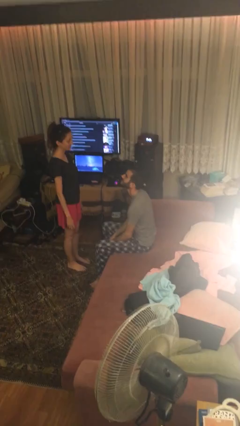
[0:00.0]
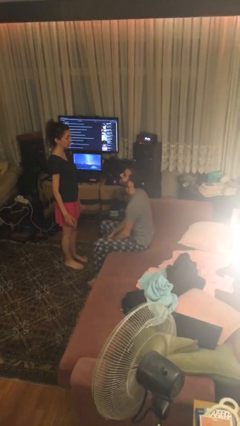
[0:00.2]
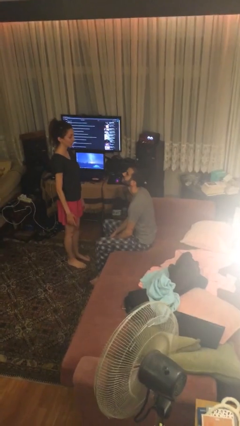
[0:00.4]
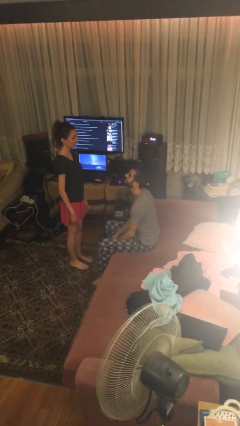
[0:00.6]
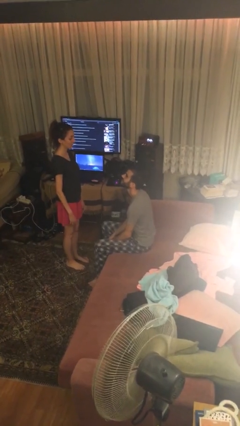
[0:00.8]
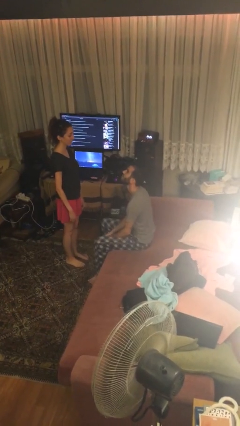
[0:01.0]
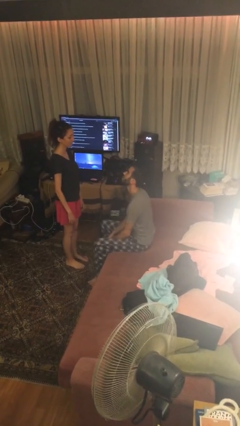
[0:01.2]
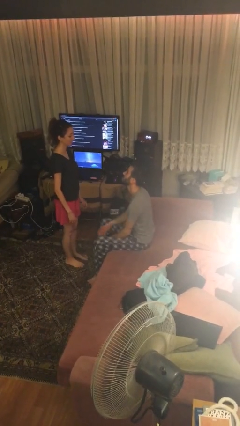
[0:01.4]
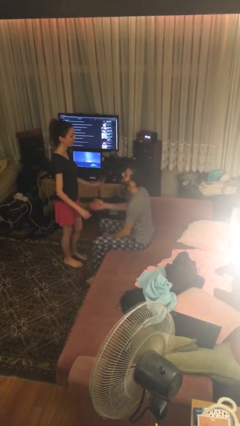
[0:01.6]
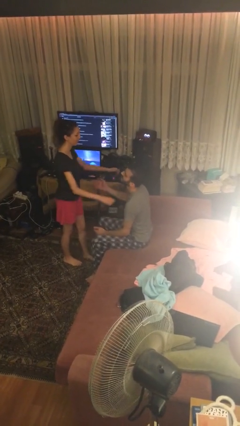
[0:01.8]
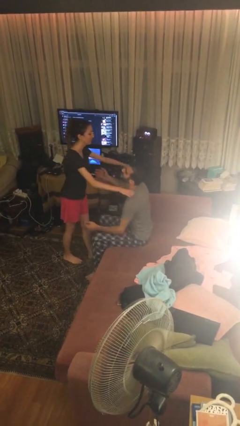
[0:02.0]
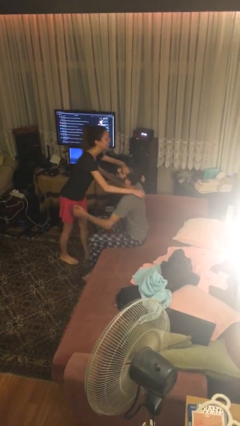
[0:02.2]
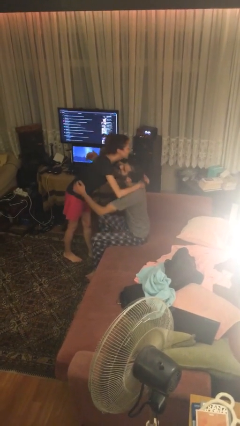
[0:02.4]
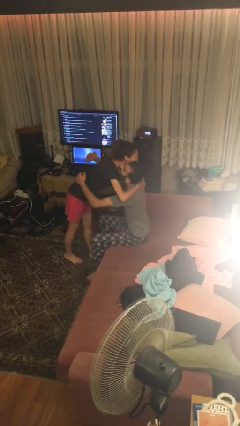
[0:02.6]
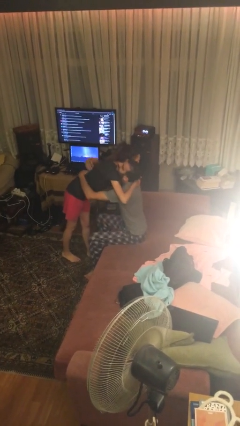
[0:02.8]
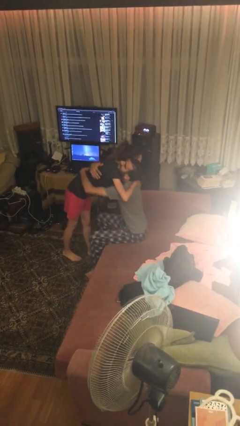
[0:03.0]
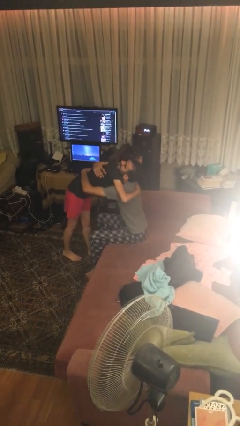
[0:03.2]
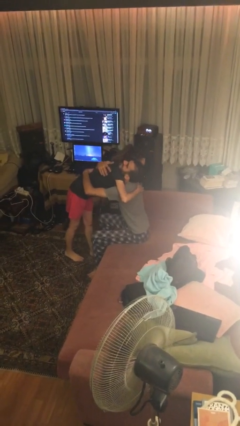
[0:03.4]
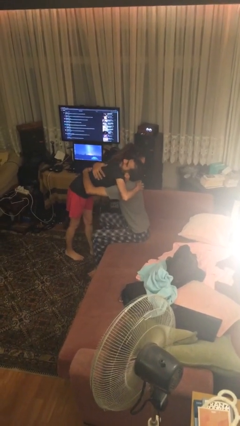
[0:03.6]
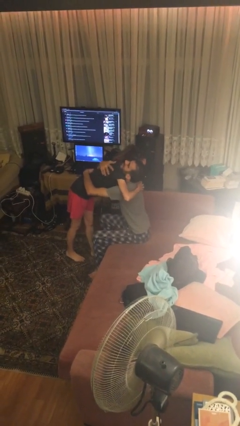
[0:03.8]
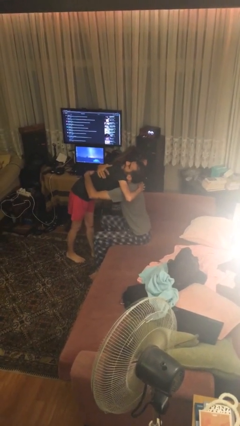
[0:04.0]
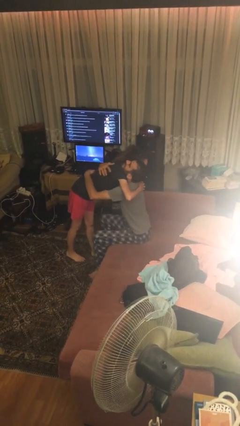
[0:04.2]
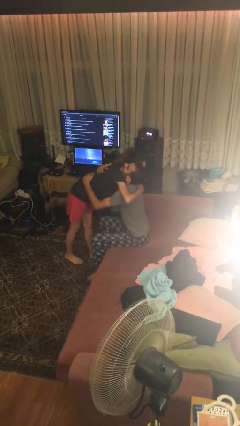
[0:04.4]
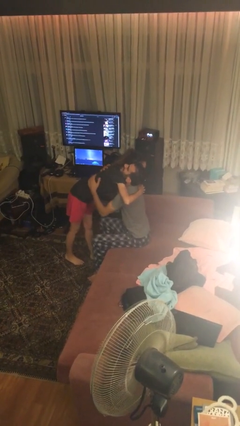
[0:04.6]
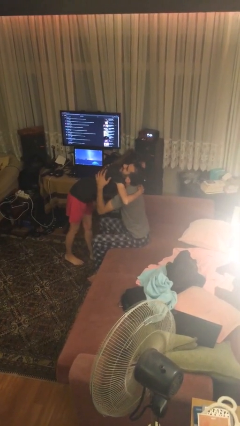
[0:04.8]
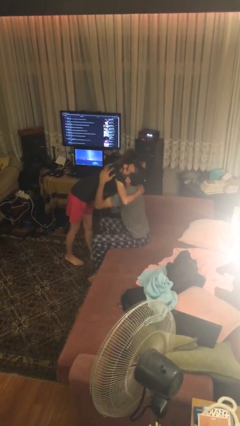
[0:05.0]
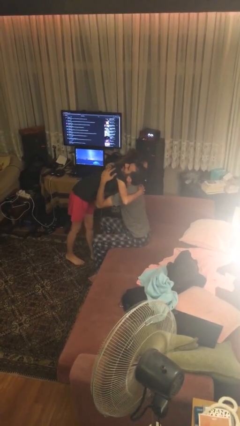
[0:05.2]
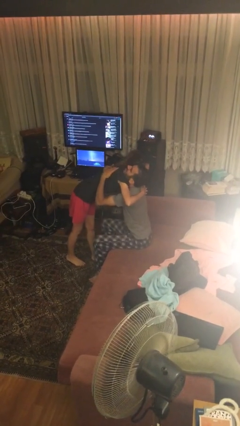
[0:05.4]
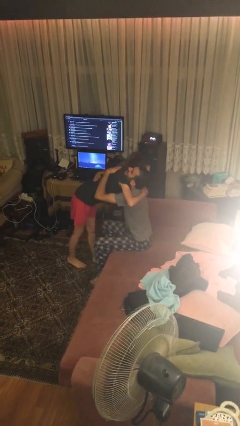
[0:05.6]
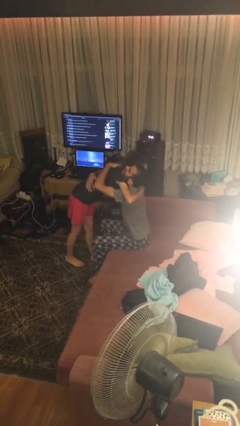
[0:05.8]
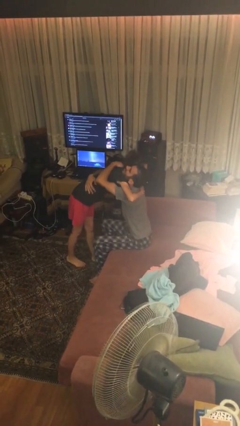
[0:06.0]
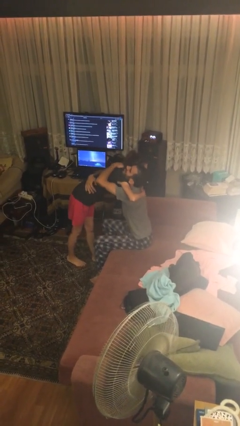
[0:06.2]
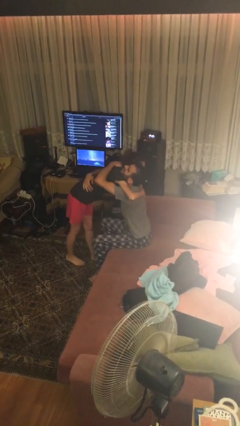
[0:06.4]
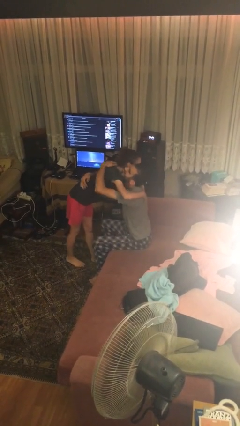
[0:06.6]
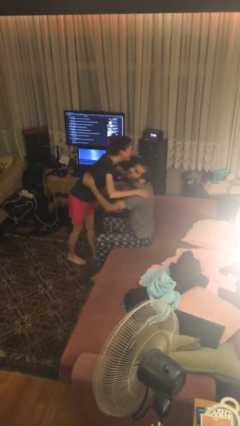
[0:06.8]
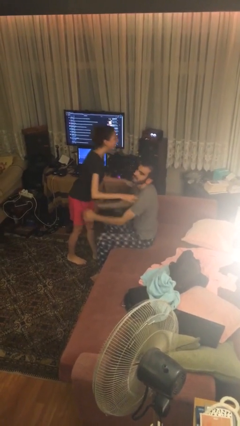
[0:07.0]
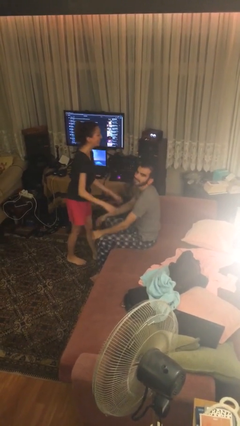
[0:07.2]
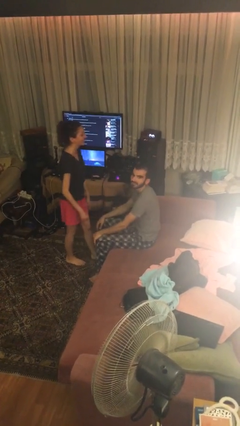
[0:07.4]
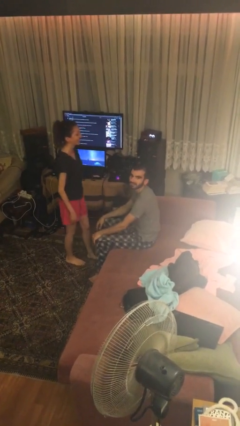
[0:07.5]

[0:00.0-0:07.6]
person embraces person

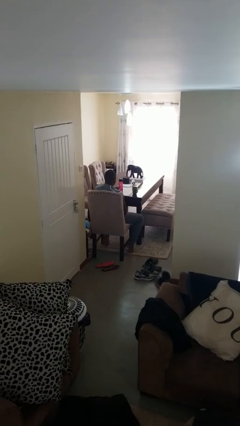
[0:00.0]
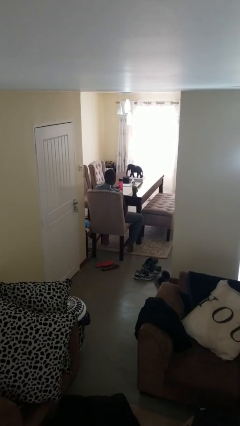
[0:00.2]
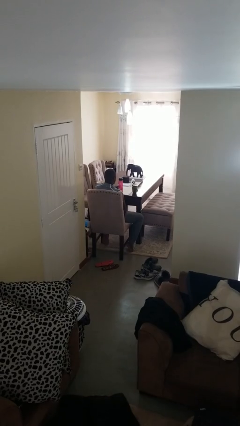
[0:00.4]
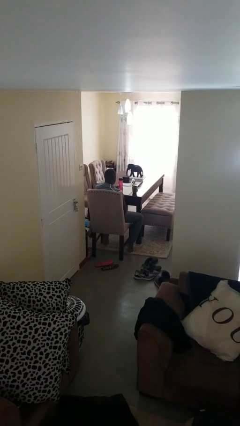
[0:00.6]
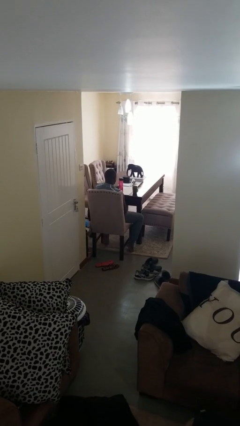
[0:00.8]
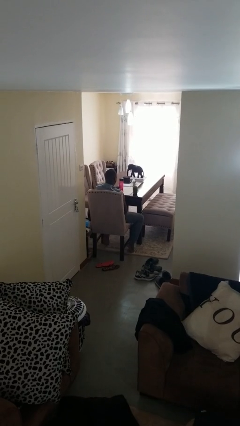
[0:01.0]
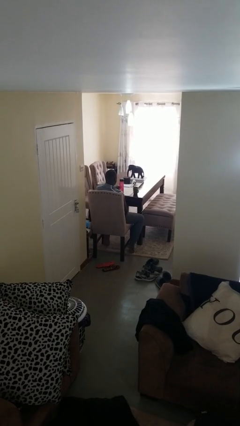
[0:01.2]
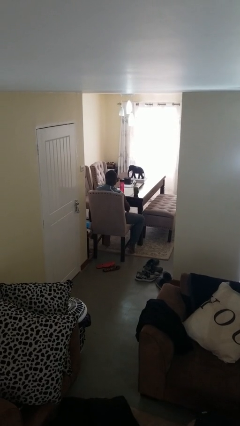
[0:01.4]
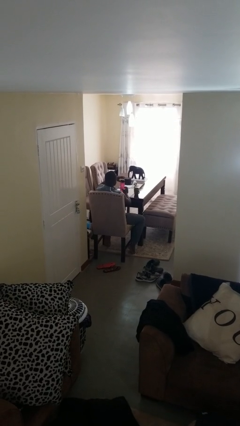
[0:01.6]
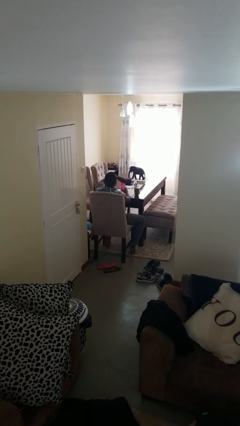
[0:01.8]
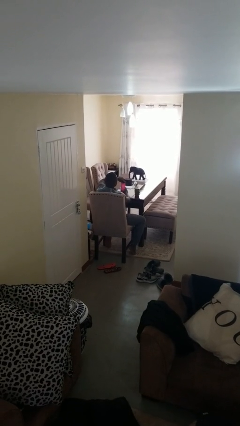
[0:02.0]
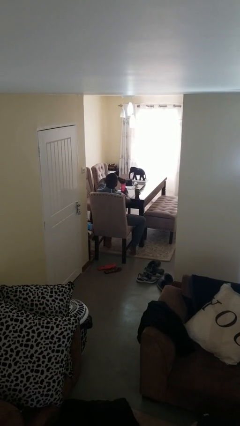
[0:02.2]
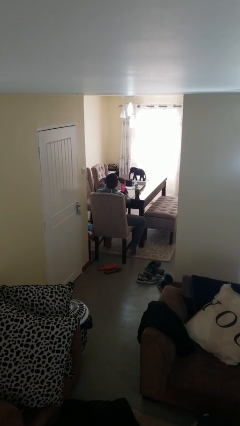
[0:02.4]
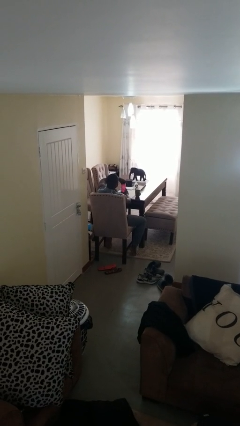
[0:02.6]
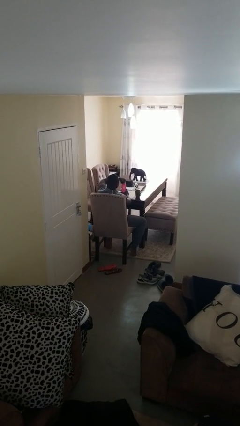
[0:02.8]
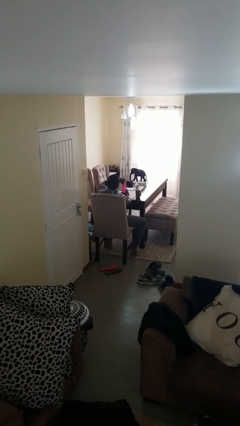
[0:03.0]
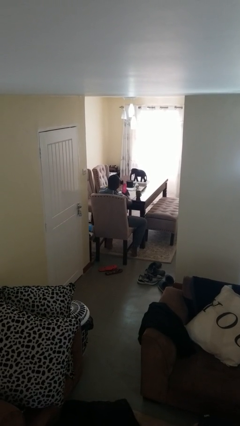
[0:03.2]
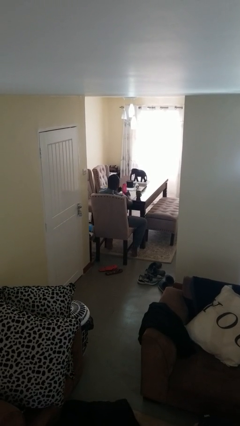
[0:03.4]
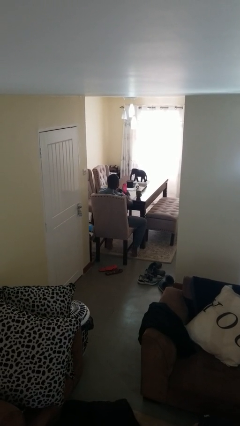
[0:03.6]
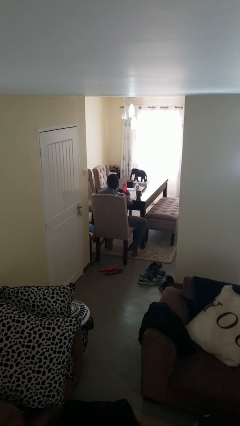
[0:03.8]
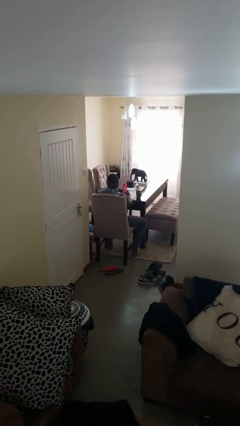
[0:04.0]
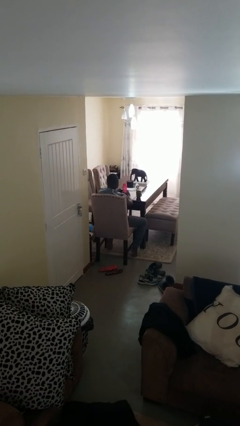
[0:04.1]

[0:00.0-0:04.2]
person unscrews lid from bottle

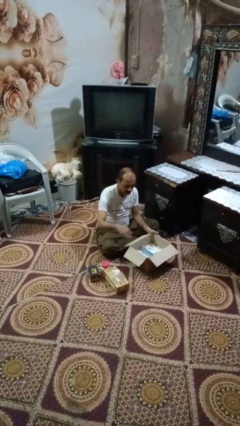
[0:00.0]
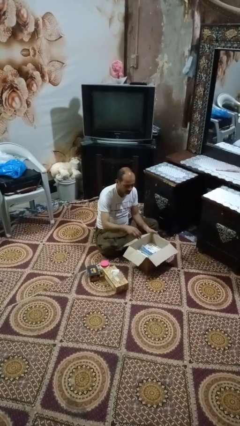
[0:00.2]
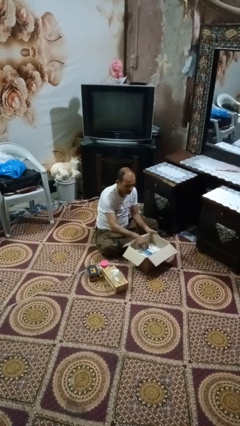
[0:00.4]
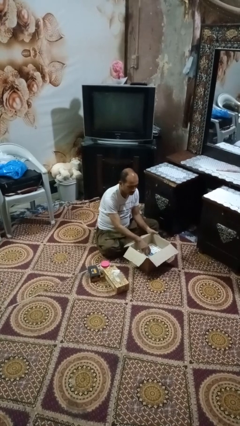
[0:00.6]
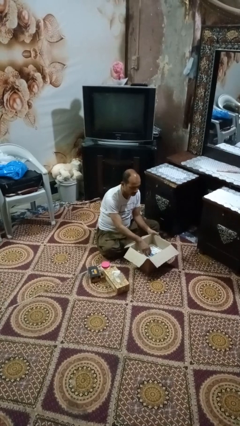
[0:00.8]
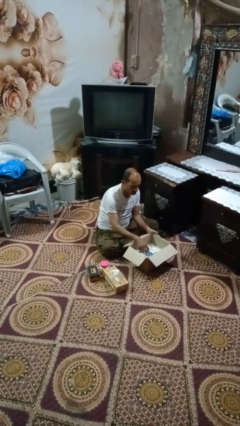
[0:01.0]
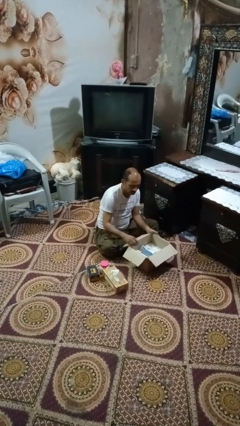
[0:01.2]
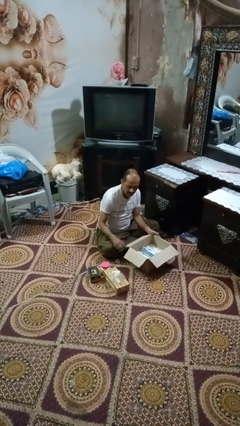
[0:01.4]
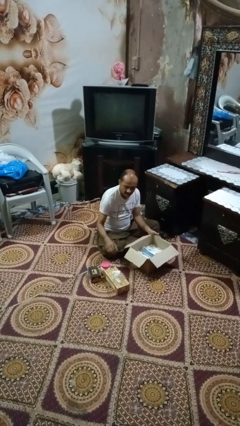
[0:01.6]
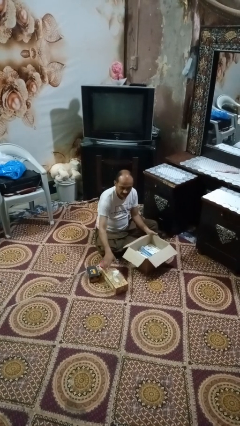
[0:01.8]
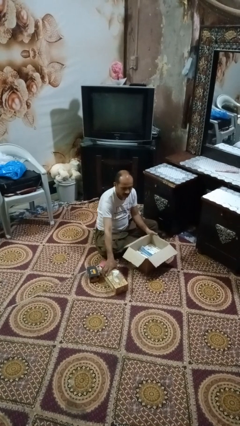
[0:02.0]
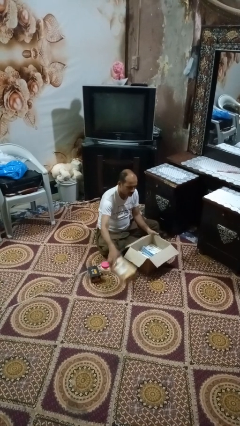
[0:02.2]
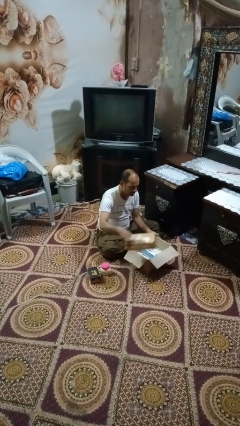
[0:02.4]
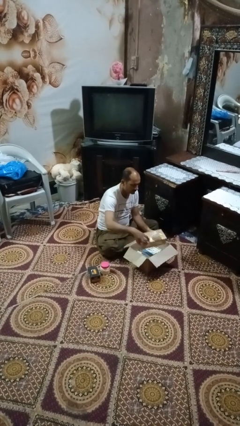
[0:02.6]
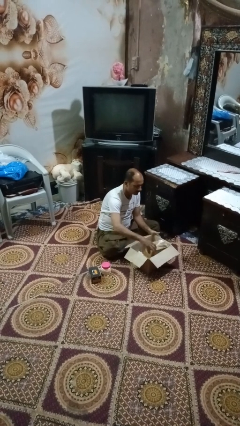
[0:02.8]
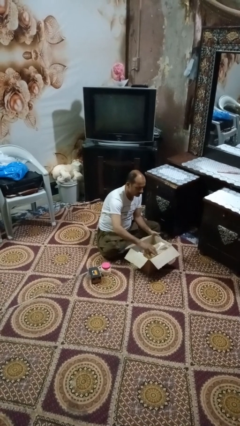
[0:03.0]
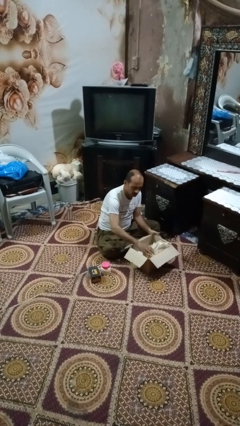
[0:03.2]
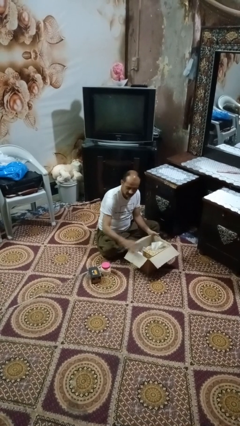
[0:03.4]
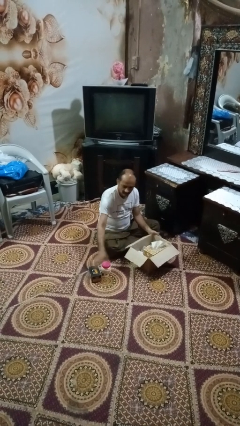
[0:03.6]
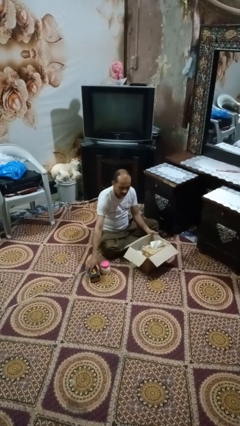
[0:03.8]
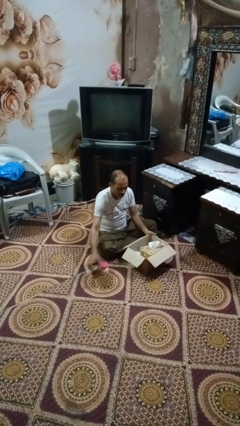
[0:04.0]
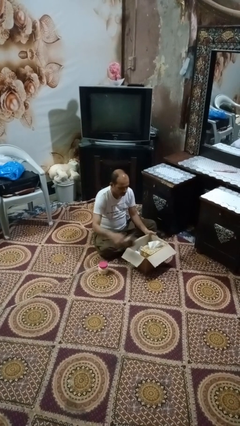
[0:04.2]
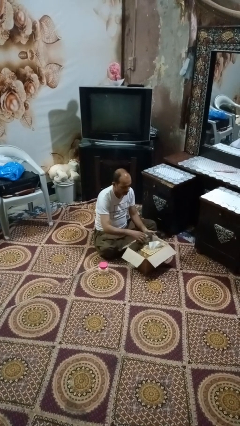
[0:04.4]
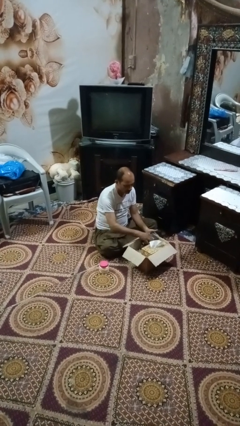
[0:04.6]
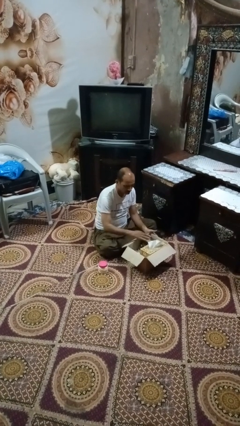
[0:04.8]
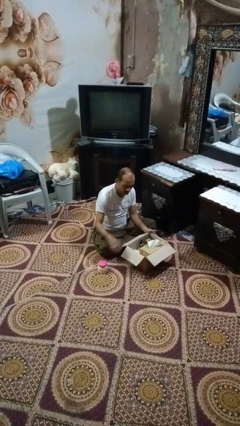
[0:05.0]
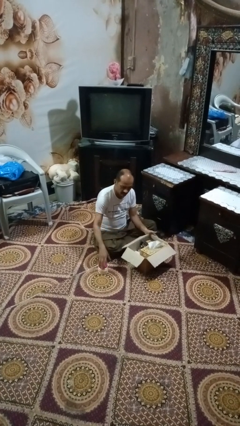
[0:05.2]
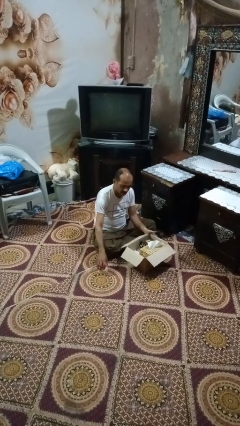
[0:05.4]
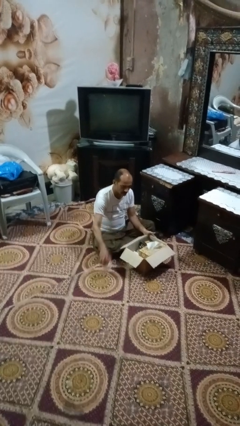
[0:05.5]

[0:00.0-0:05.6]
person puts object into box

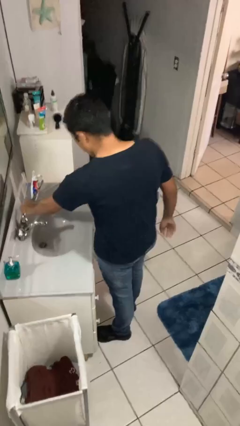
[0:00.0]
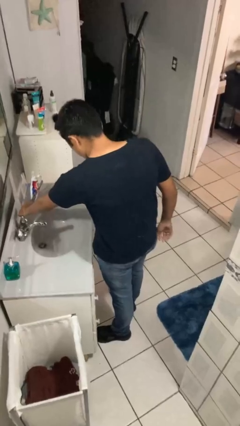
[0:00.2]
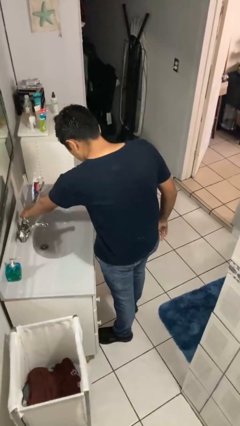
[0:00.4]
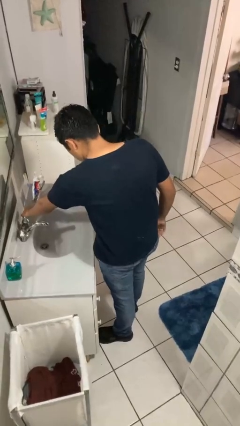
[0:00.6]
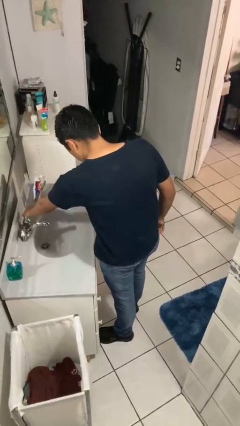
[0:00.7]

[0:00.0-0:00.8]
person turns on faucet

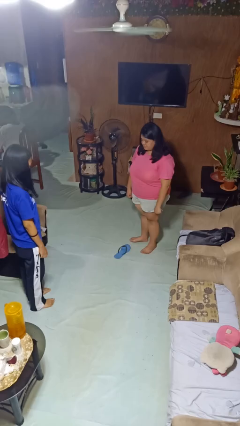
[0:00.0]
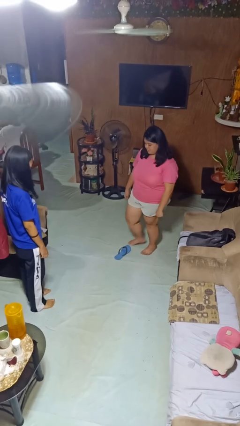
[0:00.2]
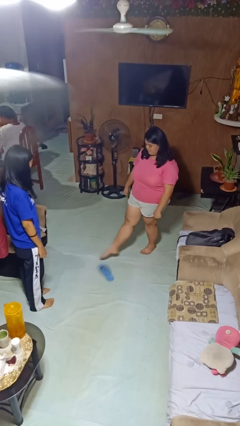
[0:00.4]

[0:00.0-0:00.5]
person kicks object to person
